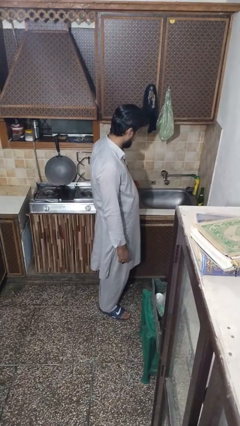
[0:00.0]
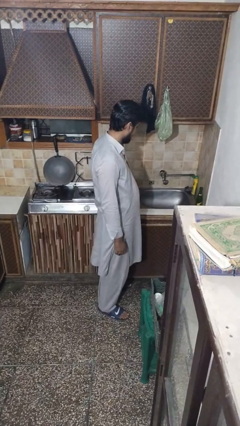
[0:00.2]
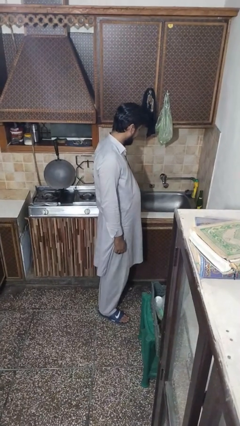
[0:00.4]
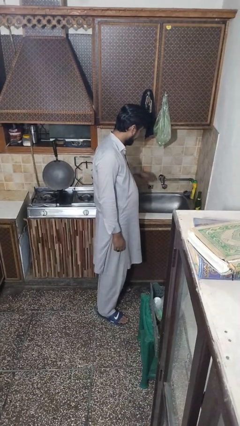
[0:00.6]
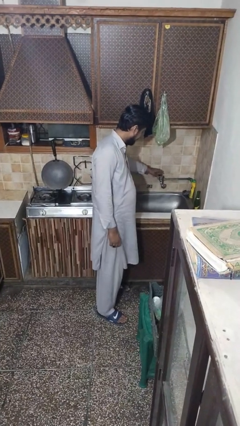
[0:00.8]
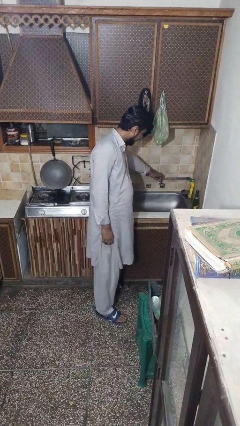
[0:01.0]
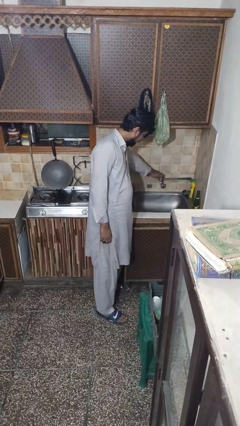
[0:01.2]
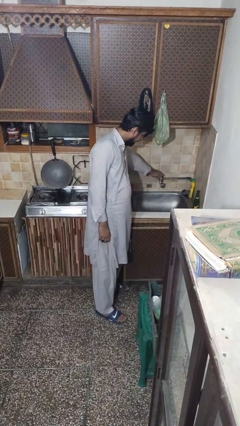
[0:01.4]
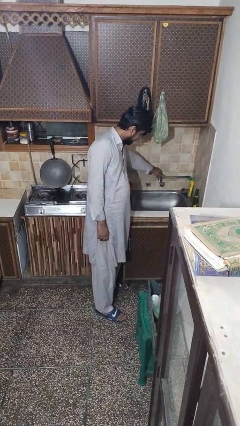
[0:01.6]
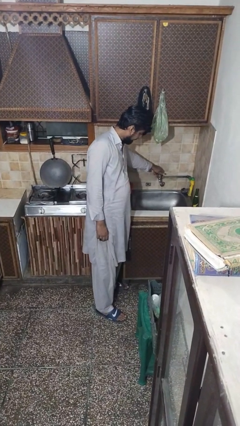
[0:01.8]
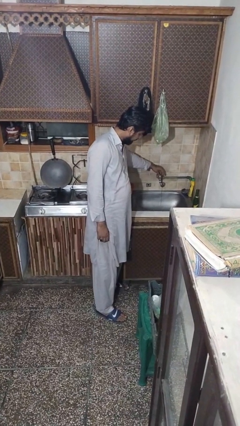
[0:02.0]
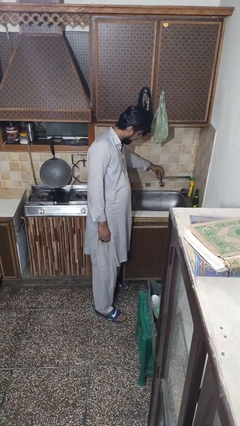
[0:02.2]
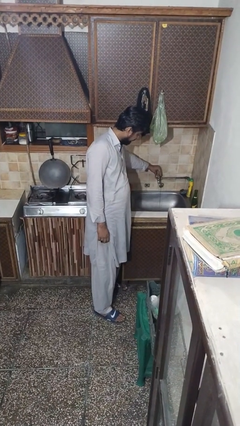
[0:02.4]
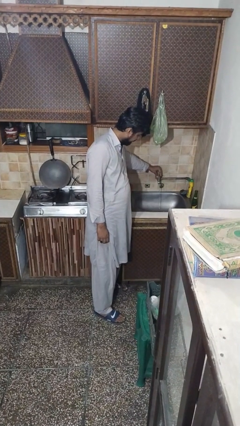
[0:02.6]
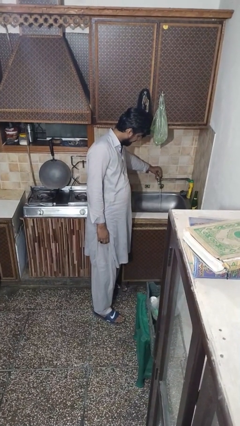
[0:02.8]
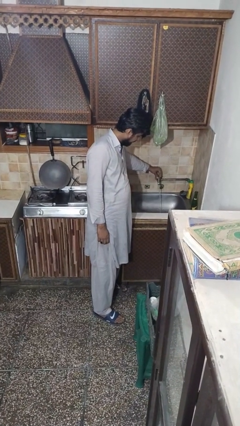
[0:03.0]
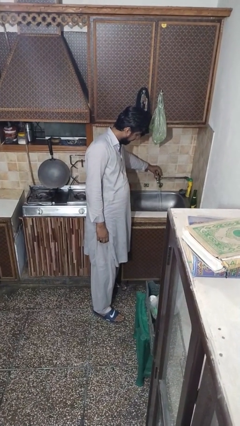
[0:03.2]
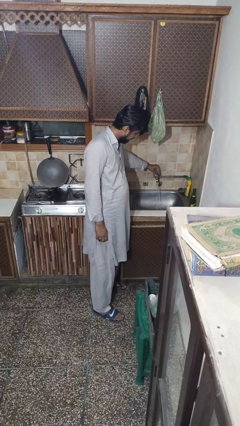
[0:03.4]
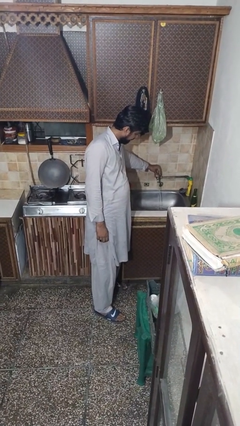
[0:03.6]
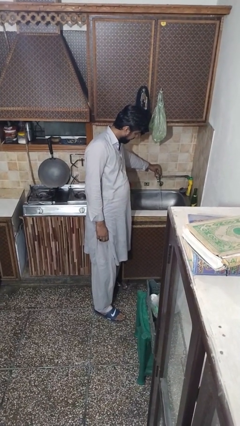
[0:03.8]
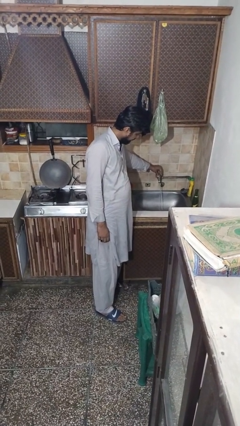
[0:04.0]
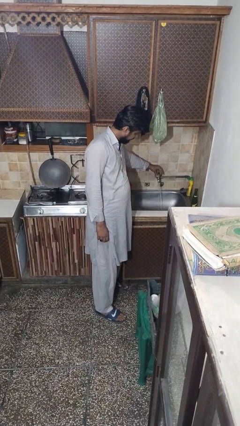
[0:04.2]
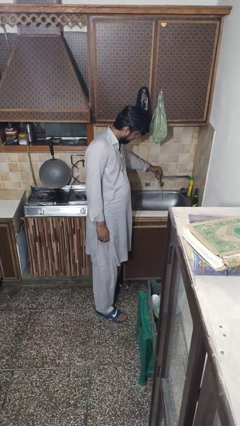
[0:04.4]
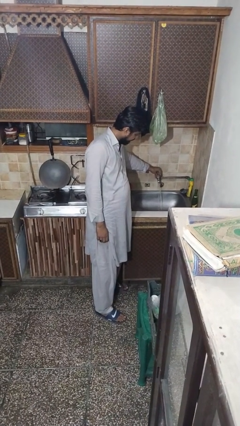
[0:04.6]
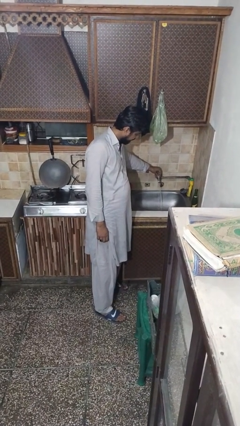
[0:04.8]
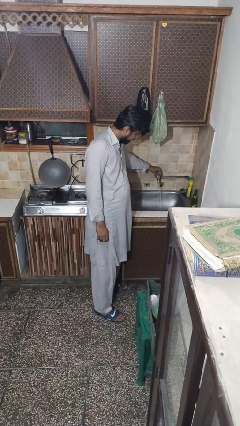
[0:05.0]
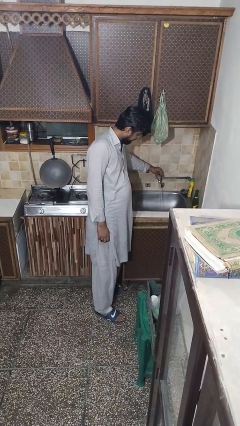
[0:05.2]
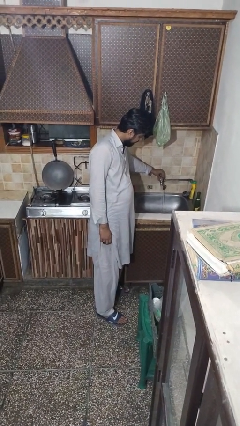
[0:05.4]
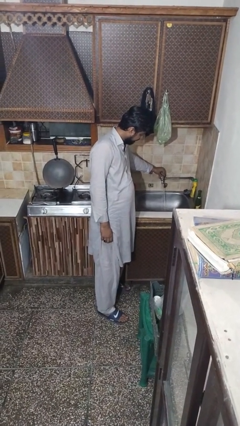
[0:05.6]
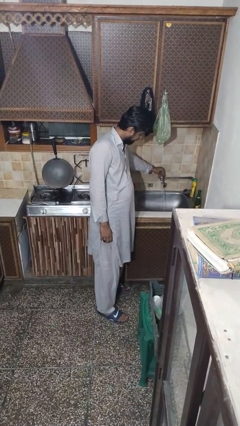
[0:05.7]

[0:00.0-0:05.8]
person turns on faucet

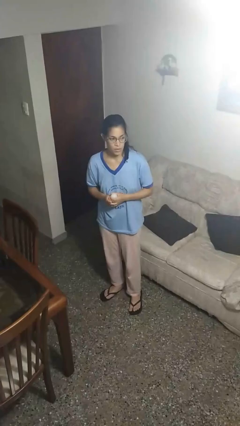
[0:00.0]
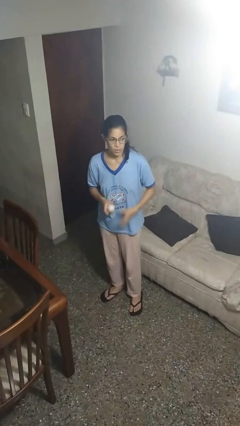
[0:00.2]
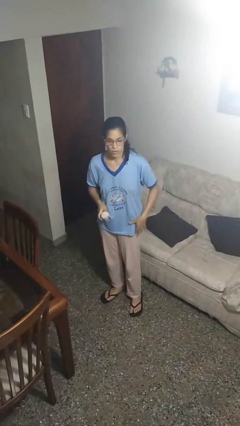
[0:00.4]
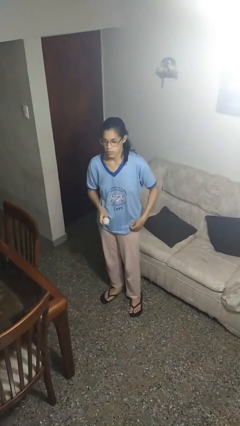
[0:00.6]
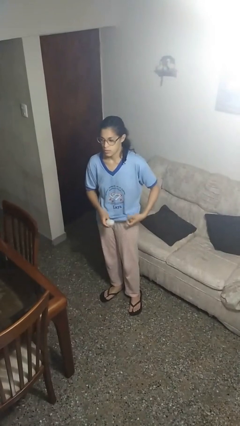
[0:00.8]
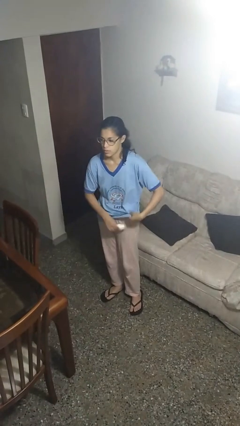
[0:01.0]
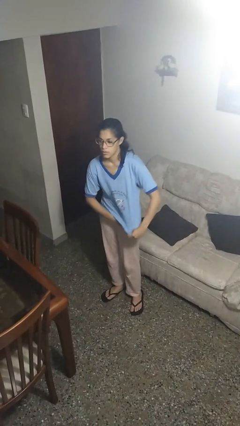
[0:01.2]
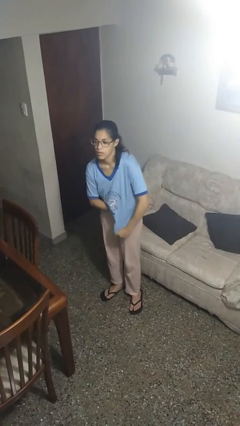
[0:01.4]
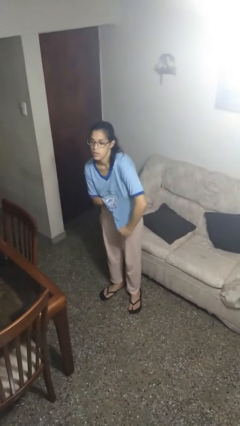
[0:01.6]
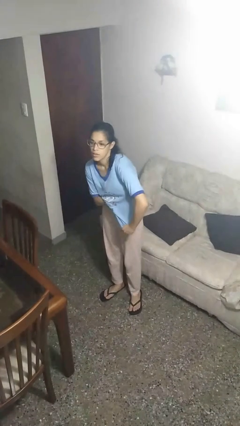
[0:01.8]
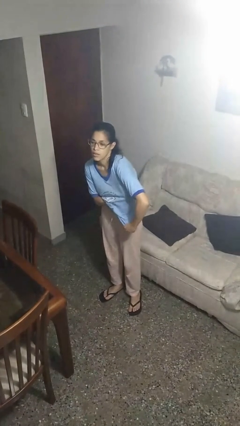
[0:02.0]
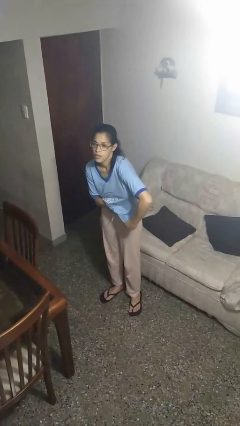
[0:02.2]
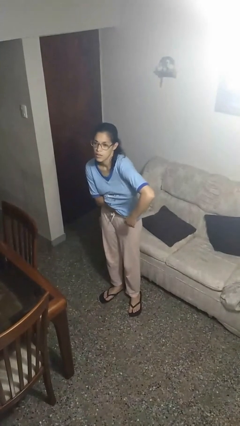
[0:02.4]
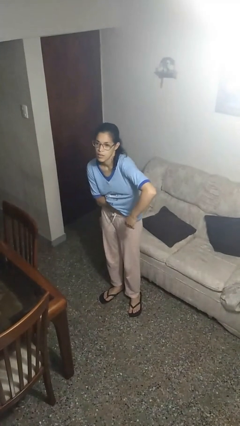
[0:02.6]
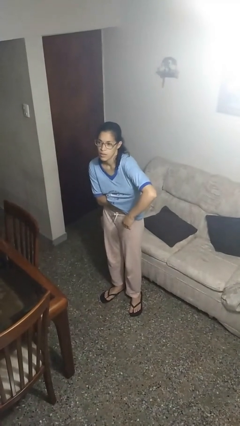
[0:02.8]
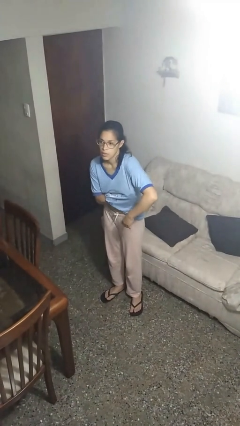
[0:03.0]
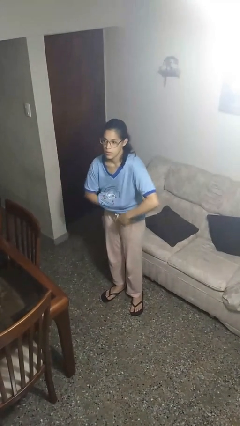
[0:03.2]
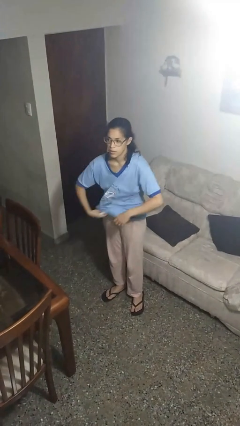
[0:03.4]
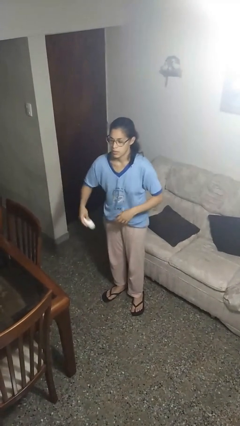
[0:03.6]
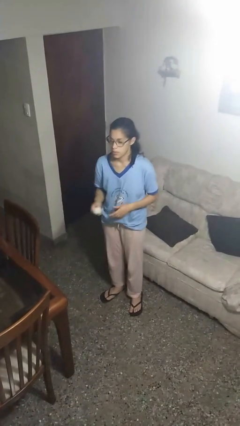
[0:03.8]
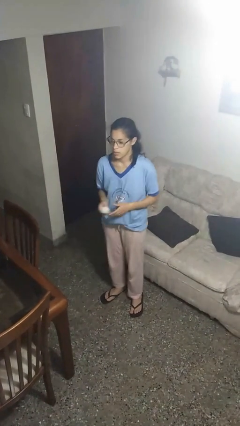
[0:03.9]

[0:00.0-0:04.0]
person applies deodorant

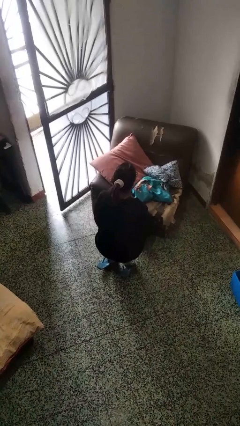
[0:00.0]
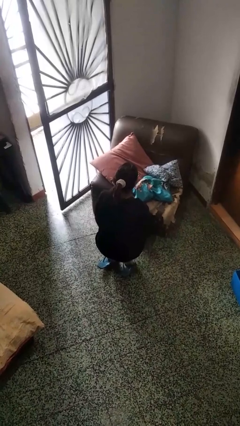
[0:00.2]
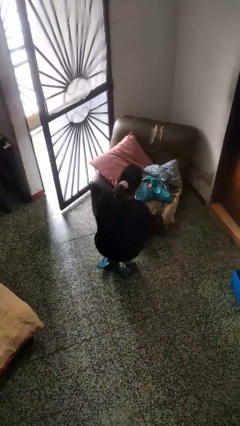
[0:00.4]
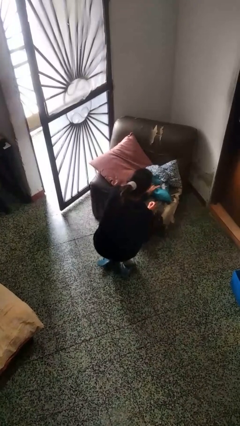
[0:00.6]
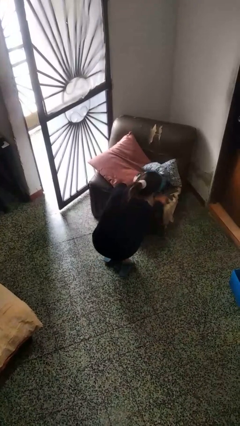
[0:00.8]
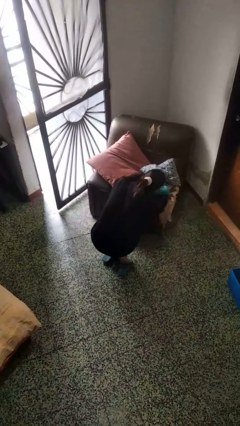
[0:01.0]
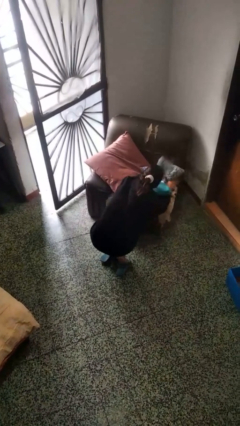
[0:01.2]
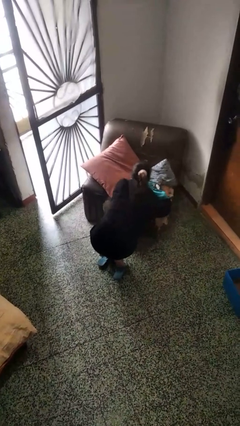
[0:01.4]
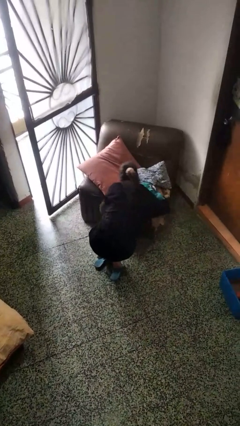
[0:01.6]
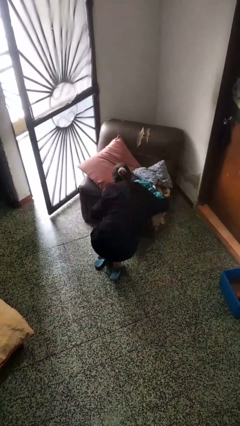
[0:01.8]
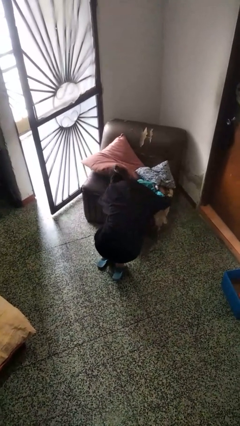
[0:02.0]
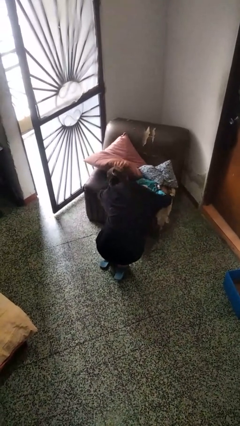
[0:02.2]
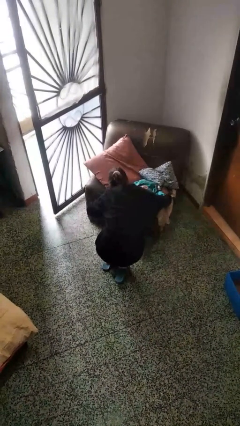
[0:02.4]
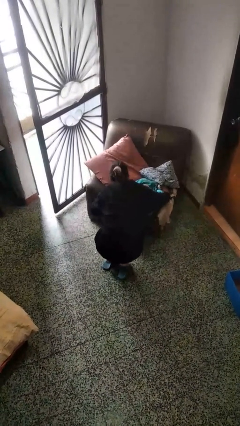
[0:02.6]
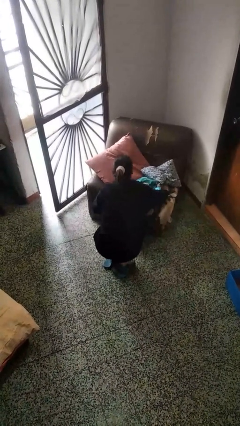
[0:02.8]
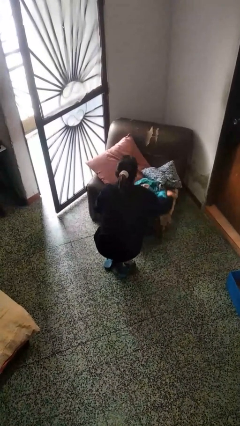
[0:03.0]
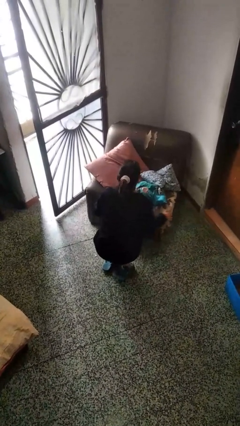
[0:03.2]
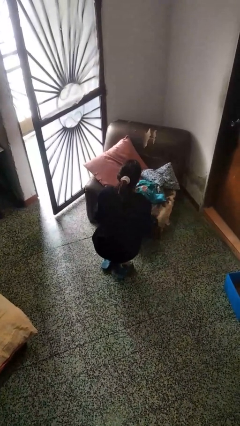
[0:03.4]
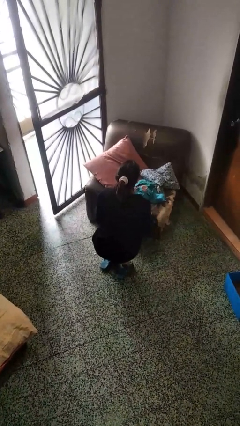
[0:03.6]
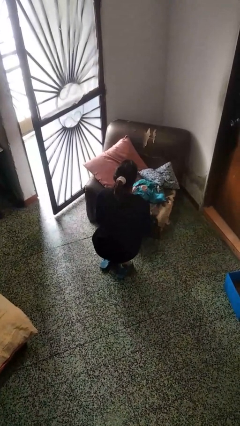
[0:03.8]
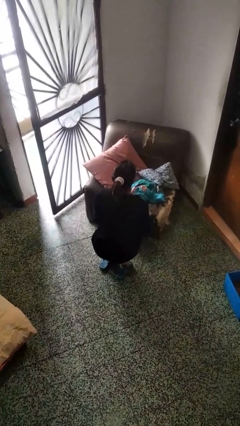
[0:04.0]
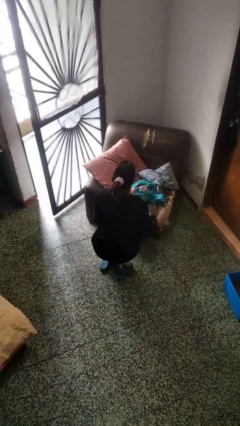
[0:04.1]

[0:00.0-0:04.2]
person searches in couch

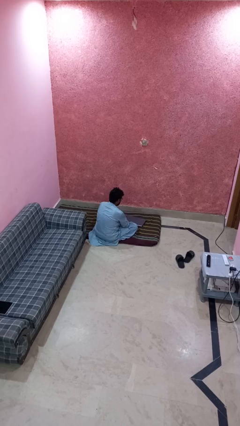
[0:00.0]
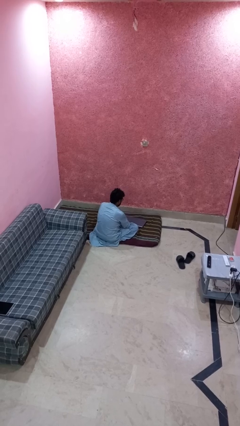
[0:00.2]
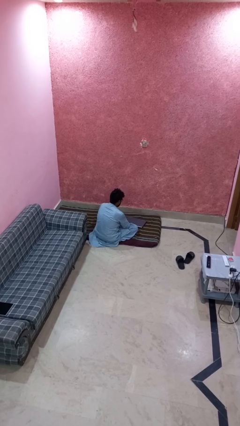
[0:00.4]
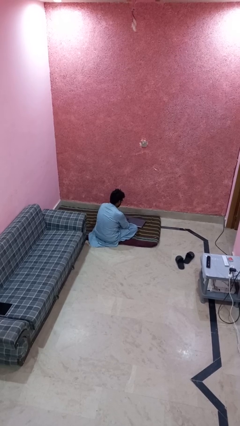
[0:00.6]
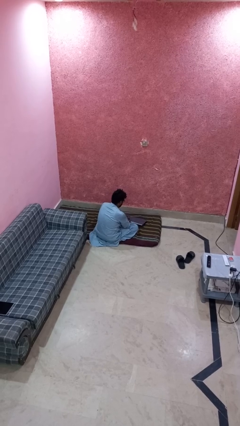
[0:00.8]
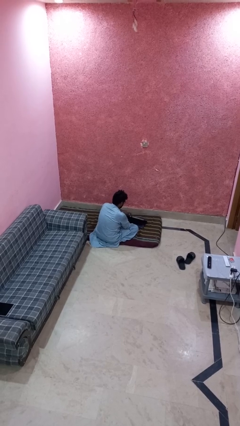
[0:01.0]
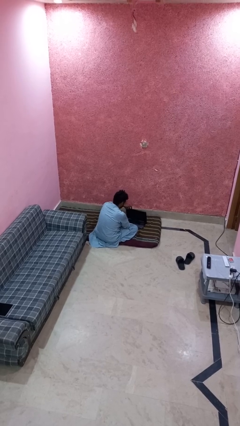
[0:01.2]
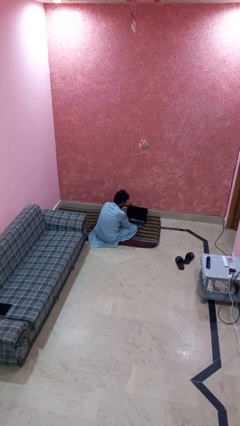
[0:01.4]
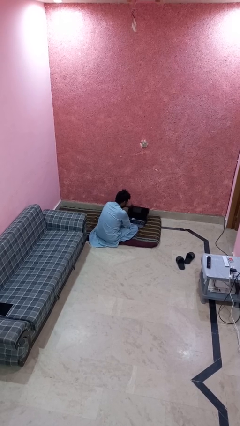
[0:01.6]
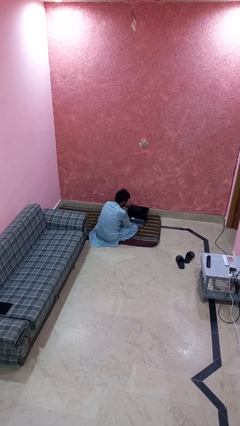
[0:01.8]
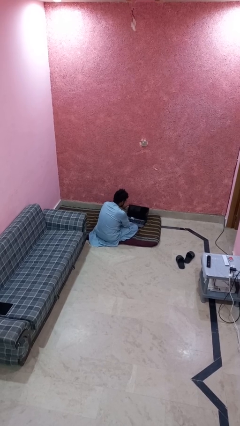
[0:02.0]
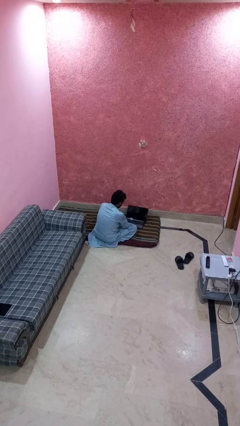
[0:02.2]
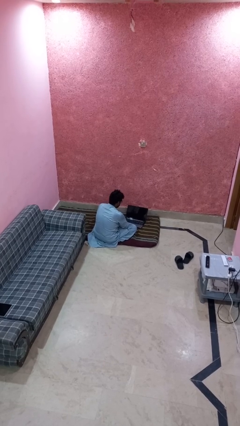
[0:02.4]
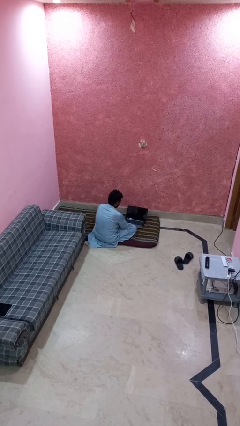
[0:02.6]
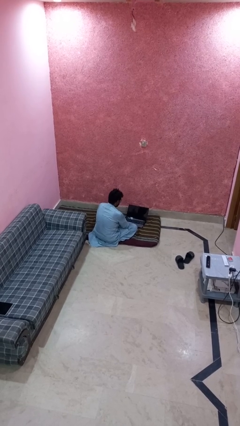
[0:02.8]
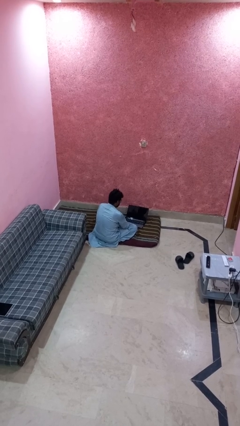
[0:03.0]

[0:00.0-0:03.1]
person opens laptop

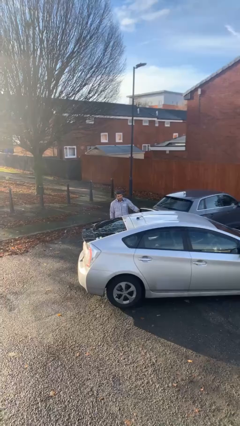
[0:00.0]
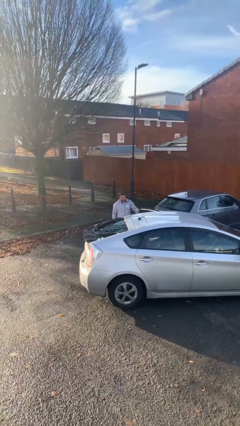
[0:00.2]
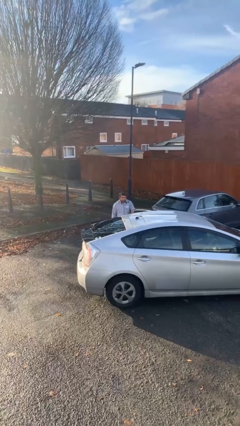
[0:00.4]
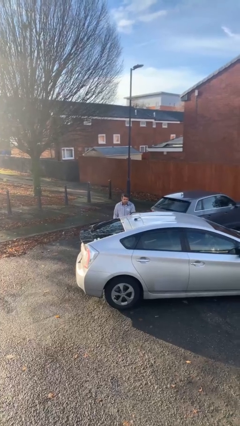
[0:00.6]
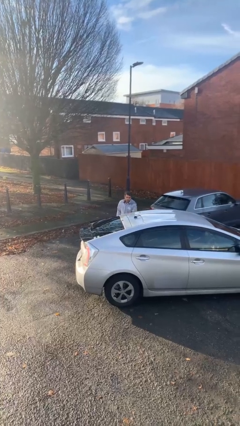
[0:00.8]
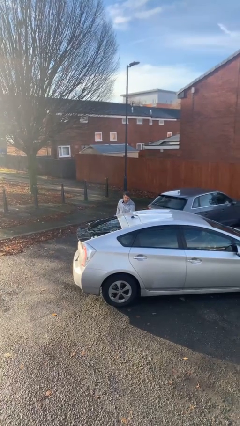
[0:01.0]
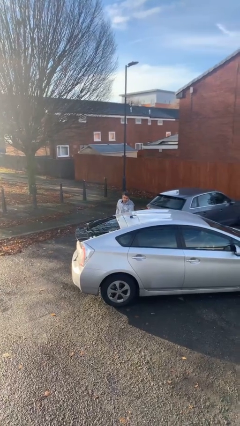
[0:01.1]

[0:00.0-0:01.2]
person closes car door
